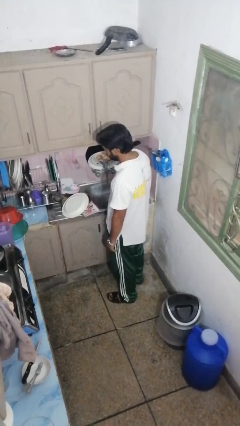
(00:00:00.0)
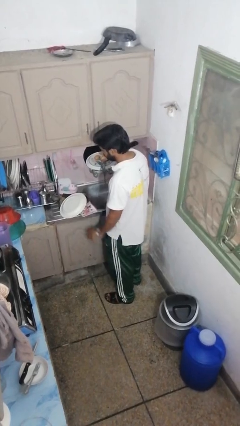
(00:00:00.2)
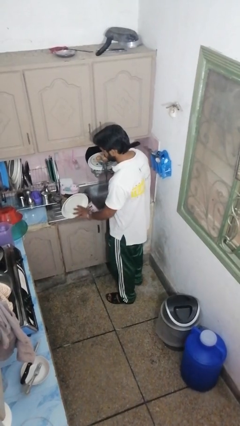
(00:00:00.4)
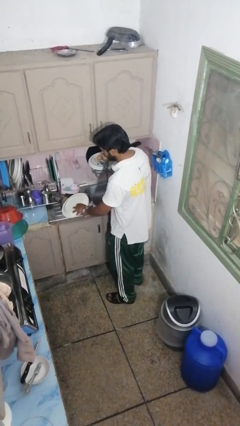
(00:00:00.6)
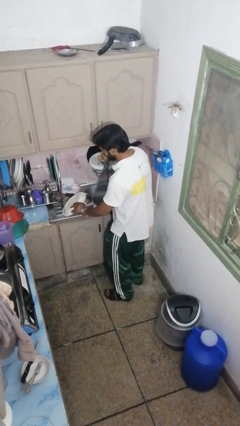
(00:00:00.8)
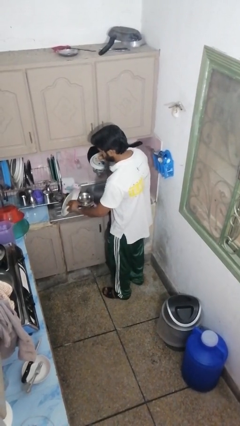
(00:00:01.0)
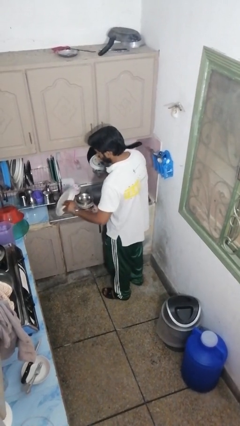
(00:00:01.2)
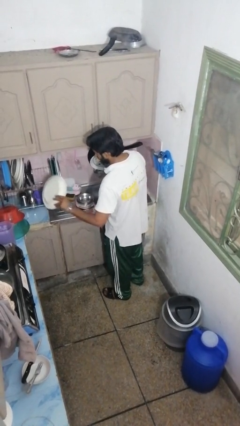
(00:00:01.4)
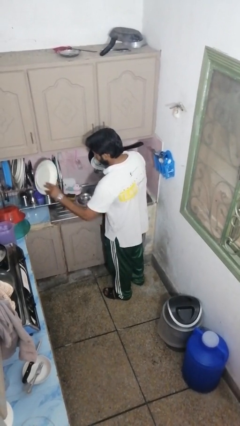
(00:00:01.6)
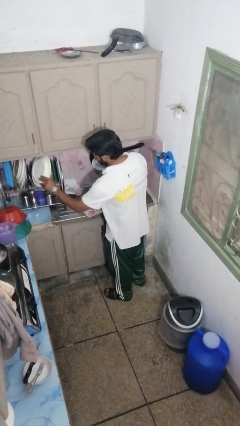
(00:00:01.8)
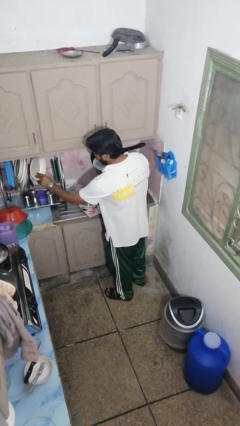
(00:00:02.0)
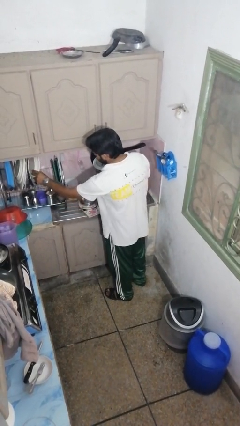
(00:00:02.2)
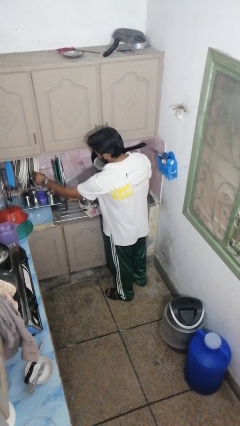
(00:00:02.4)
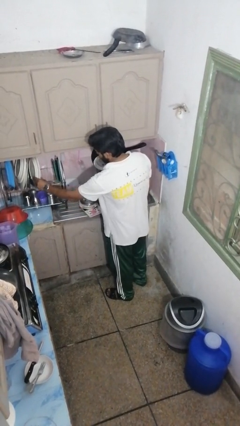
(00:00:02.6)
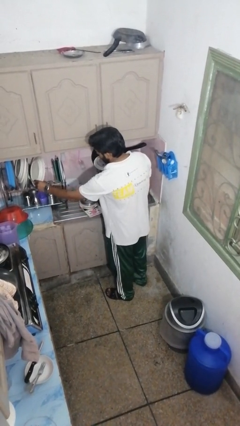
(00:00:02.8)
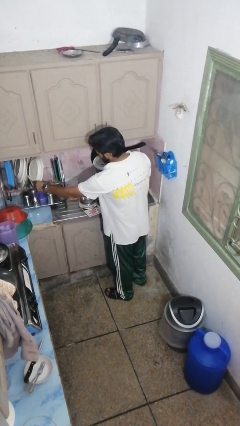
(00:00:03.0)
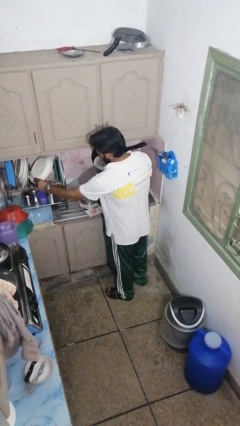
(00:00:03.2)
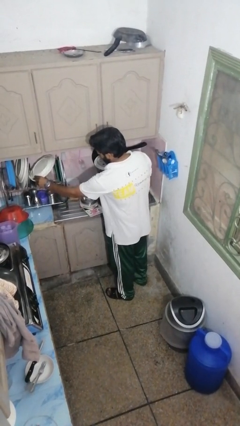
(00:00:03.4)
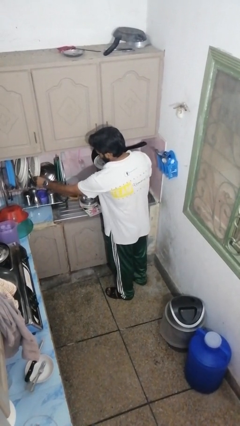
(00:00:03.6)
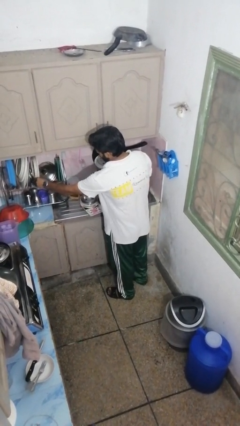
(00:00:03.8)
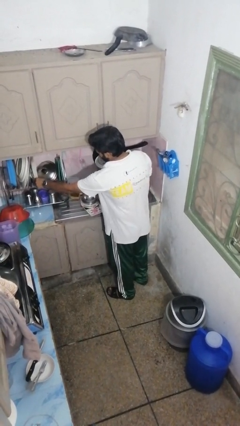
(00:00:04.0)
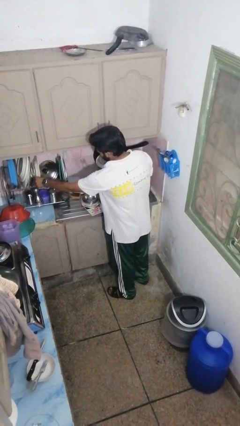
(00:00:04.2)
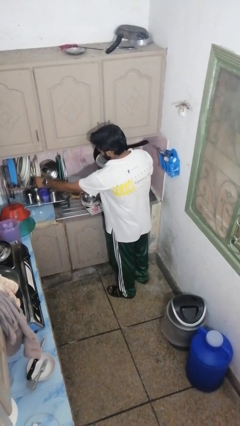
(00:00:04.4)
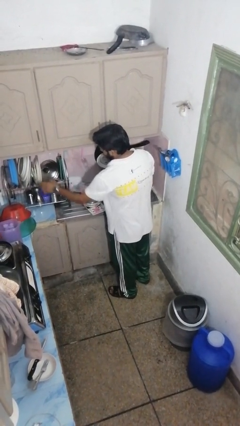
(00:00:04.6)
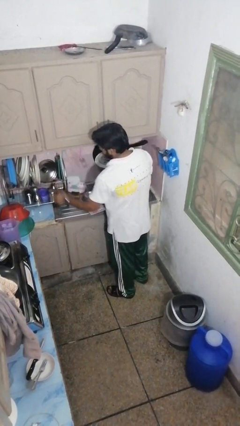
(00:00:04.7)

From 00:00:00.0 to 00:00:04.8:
person loads dishwasher

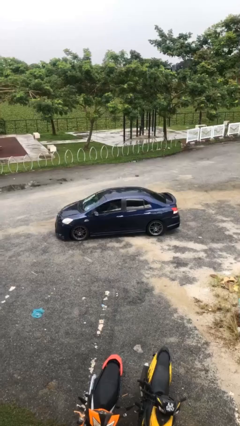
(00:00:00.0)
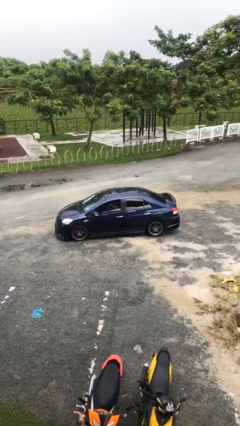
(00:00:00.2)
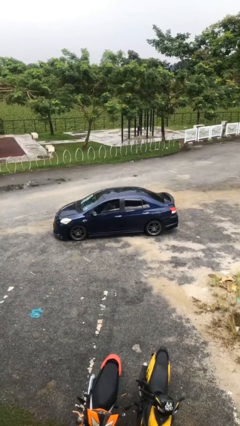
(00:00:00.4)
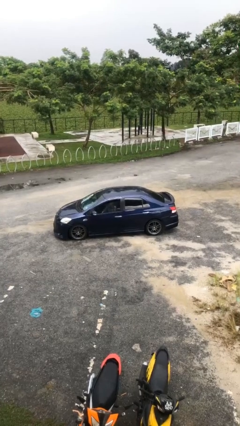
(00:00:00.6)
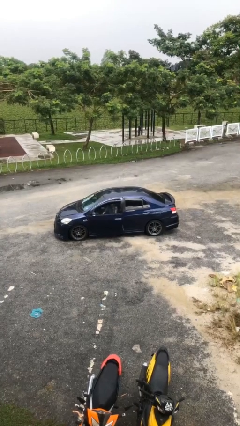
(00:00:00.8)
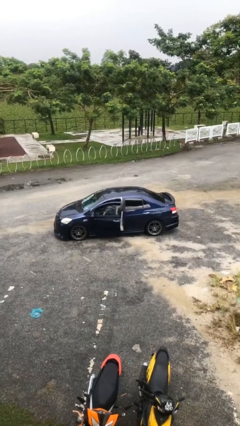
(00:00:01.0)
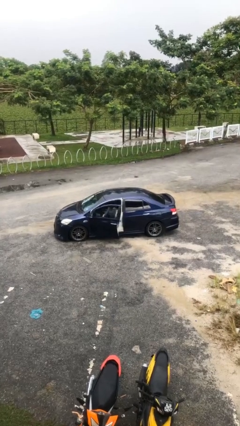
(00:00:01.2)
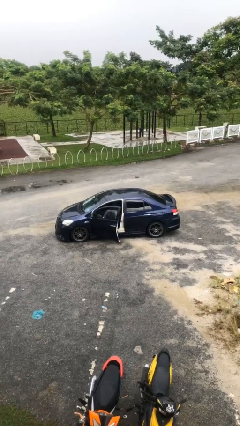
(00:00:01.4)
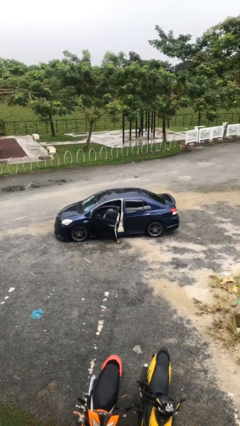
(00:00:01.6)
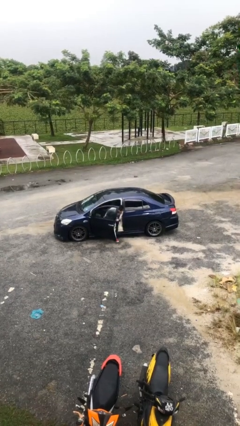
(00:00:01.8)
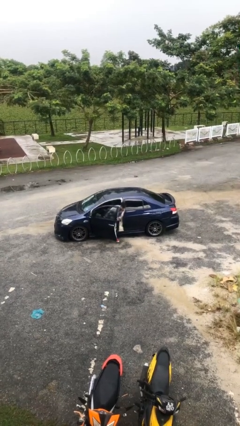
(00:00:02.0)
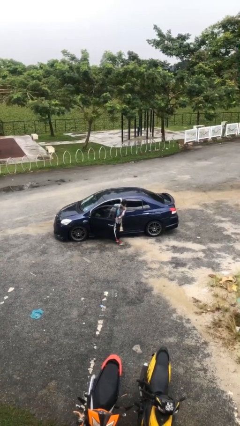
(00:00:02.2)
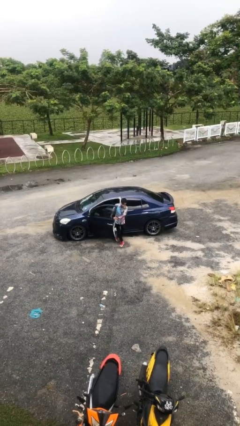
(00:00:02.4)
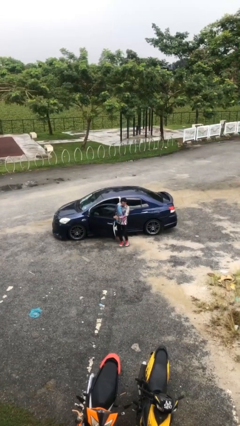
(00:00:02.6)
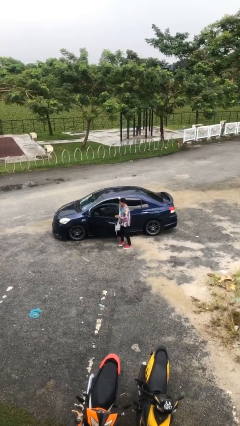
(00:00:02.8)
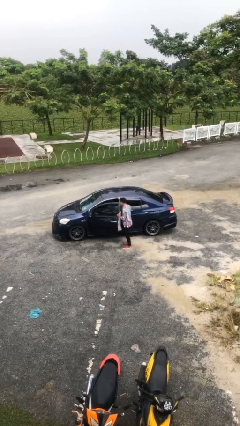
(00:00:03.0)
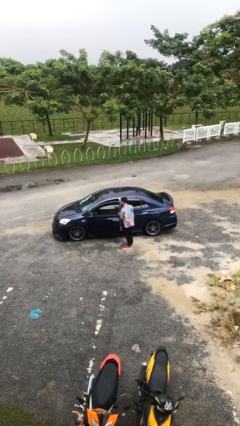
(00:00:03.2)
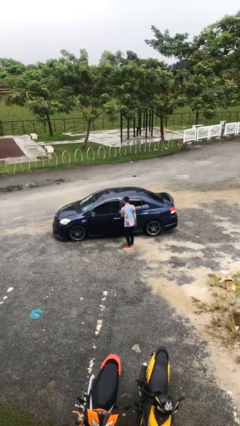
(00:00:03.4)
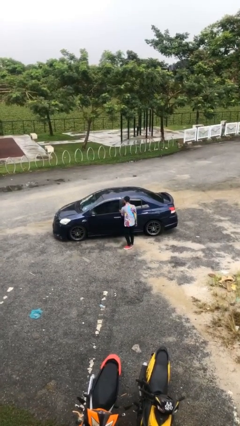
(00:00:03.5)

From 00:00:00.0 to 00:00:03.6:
car drops off person

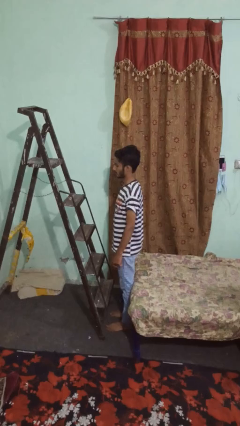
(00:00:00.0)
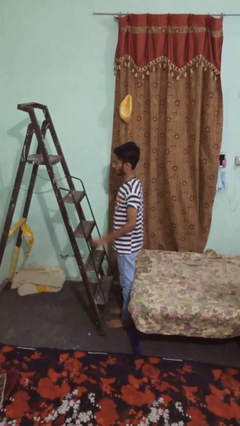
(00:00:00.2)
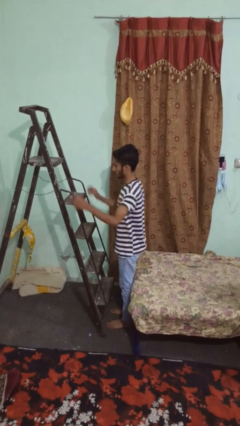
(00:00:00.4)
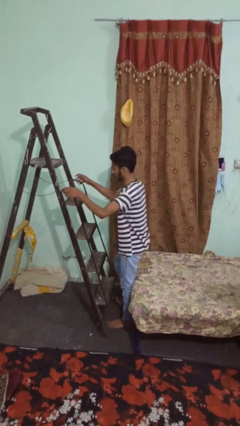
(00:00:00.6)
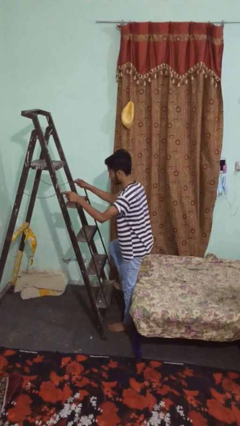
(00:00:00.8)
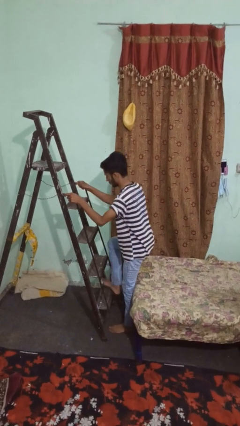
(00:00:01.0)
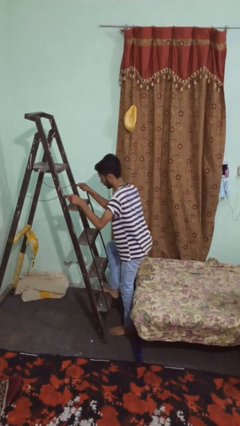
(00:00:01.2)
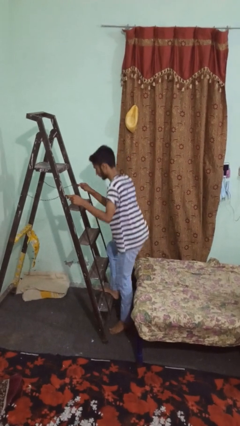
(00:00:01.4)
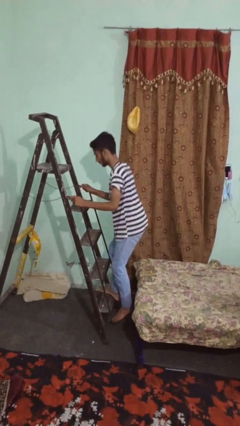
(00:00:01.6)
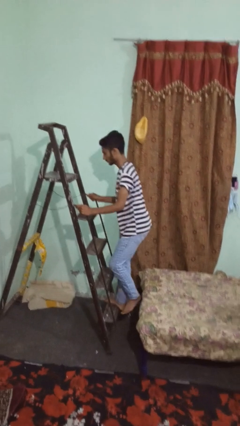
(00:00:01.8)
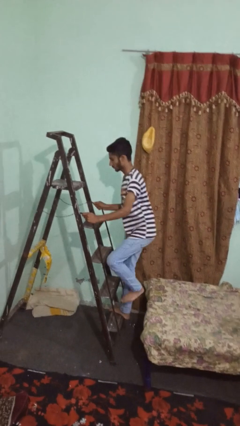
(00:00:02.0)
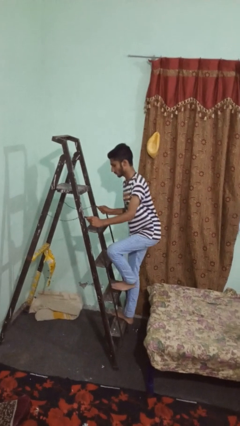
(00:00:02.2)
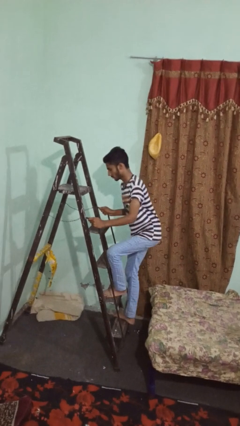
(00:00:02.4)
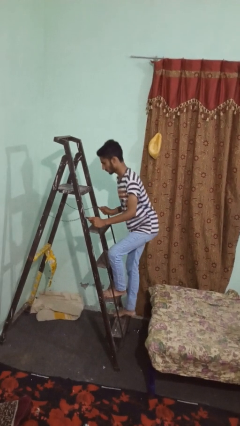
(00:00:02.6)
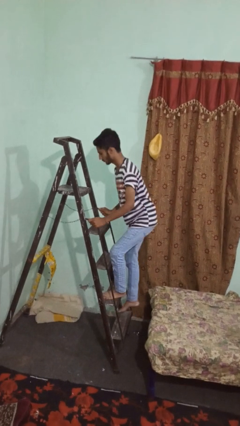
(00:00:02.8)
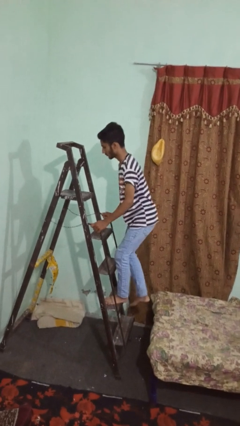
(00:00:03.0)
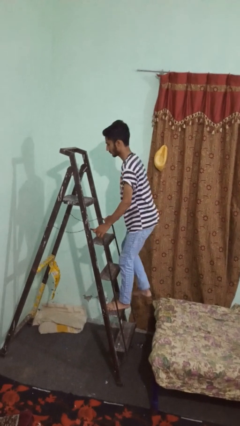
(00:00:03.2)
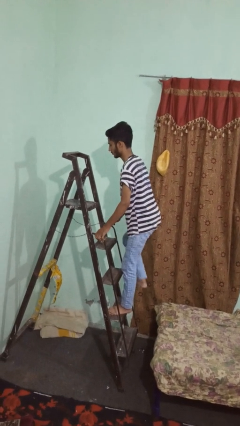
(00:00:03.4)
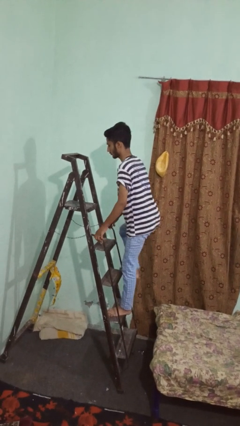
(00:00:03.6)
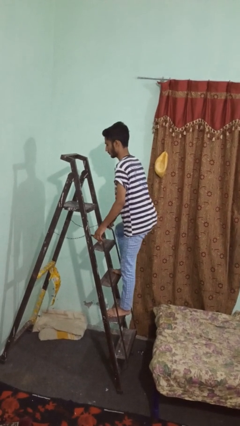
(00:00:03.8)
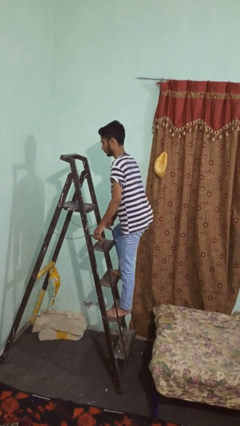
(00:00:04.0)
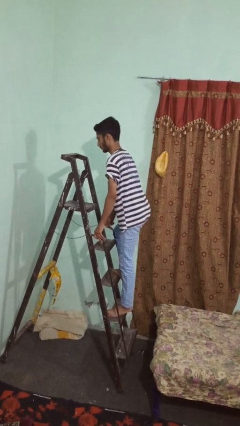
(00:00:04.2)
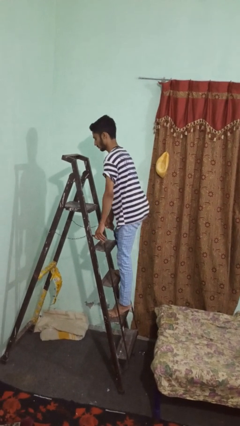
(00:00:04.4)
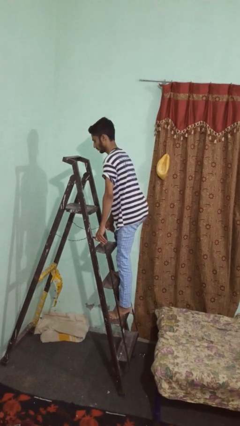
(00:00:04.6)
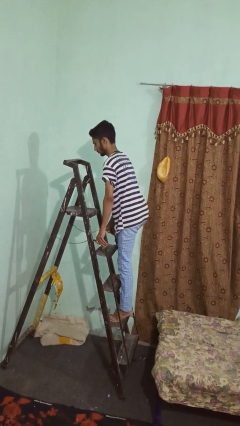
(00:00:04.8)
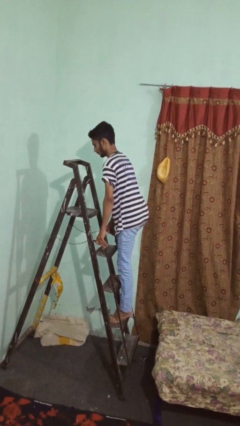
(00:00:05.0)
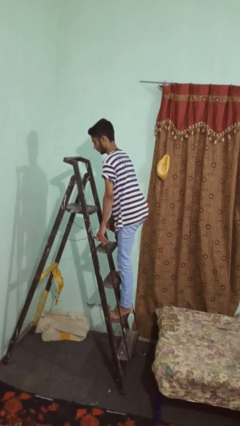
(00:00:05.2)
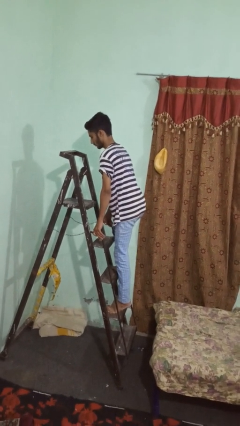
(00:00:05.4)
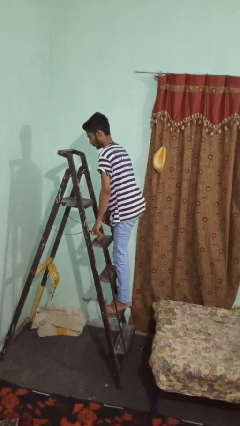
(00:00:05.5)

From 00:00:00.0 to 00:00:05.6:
person climbs up ladder

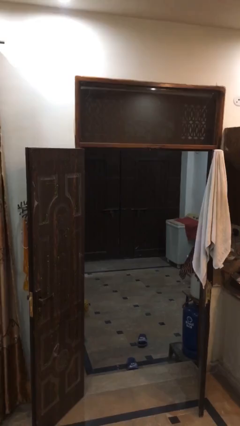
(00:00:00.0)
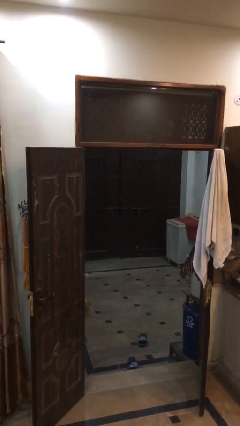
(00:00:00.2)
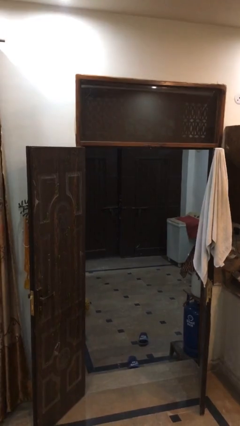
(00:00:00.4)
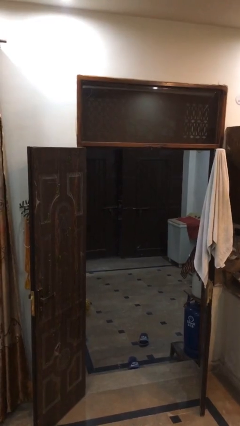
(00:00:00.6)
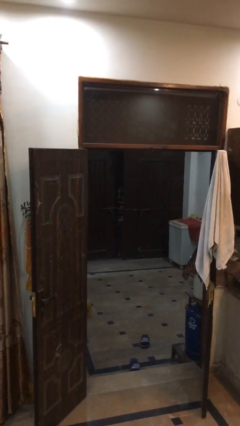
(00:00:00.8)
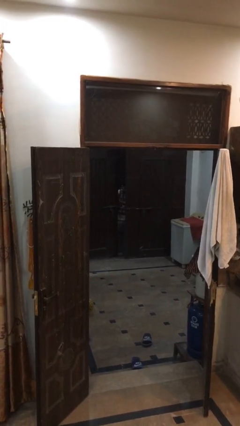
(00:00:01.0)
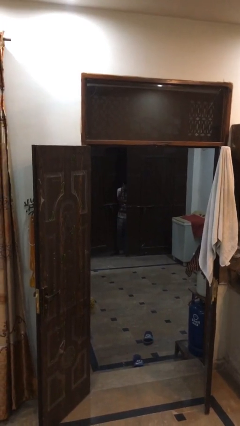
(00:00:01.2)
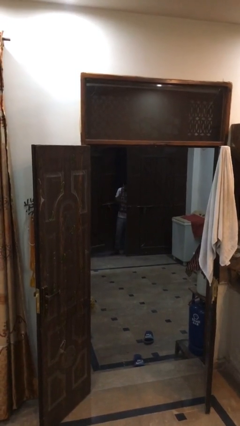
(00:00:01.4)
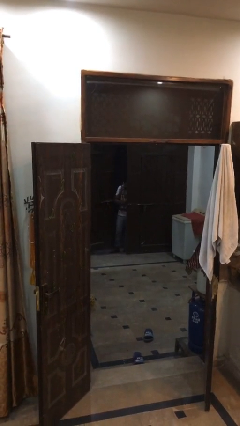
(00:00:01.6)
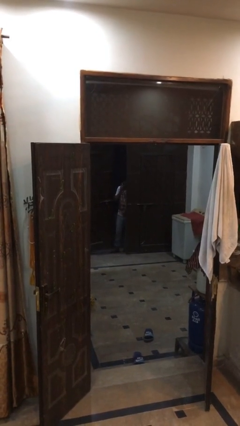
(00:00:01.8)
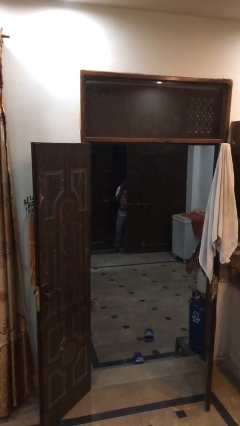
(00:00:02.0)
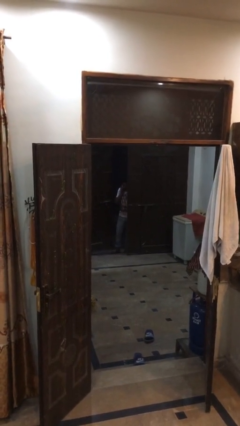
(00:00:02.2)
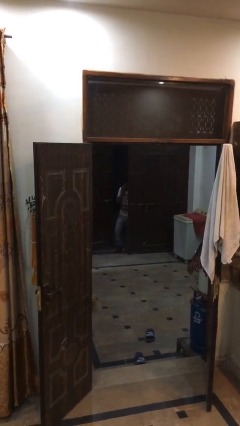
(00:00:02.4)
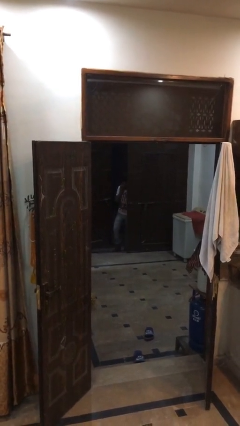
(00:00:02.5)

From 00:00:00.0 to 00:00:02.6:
person opens facility door

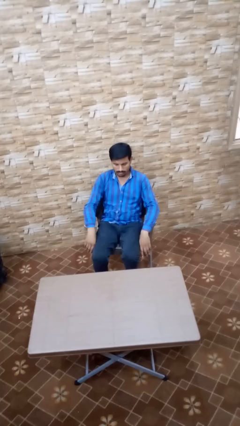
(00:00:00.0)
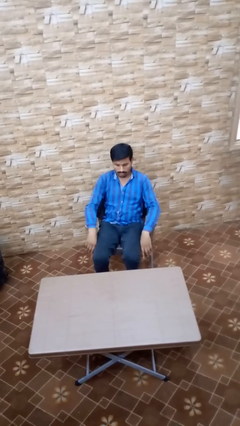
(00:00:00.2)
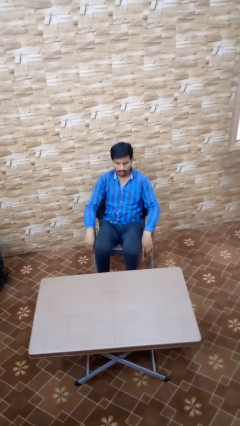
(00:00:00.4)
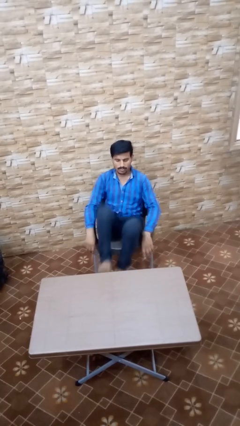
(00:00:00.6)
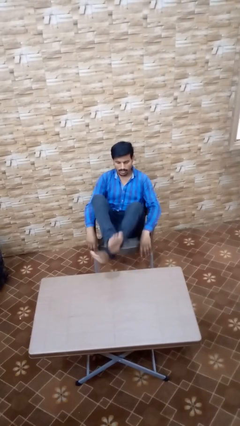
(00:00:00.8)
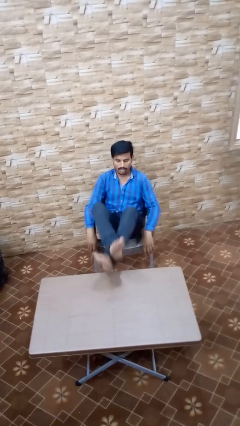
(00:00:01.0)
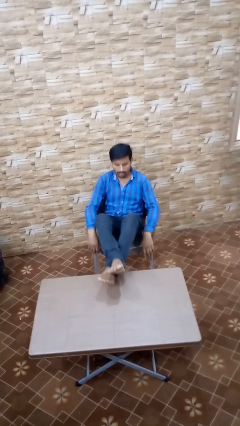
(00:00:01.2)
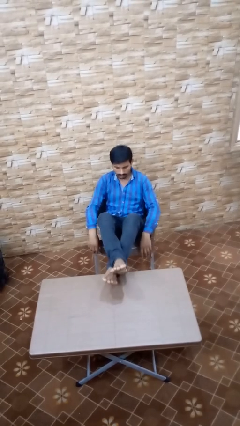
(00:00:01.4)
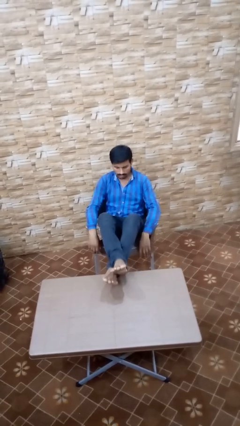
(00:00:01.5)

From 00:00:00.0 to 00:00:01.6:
person puts feet up
